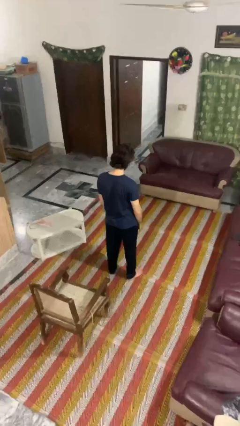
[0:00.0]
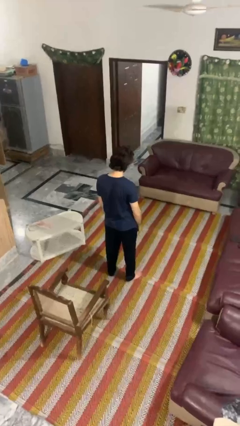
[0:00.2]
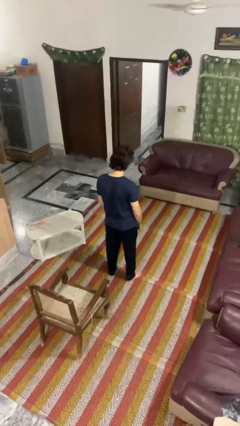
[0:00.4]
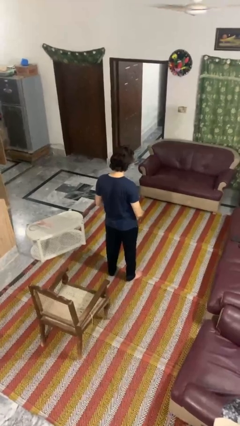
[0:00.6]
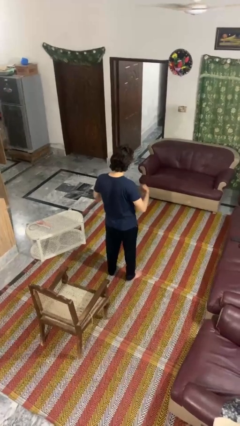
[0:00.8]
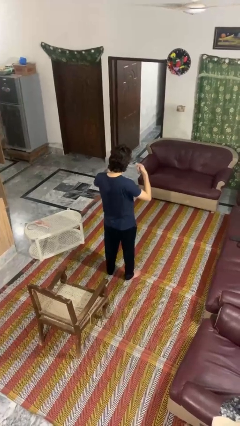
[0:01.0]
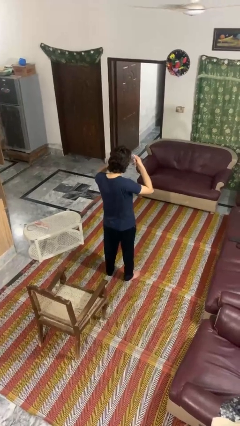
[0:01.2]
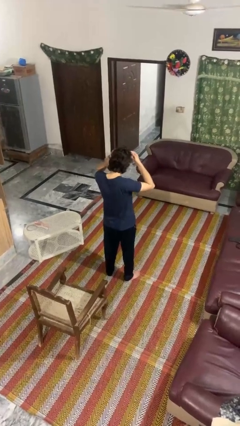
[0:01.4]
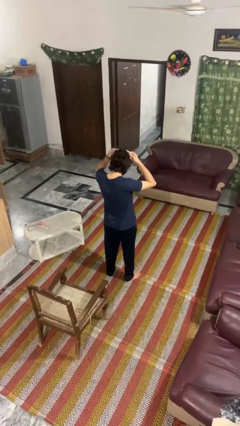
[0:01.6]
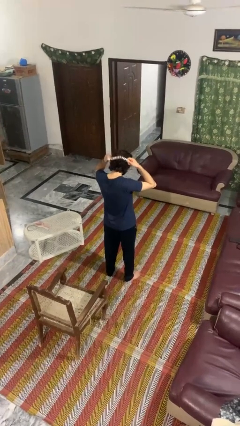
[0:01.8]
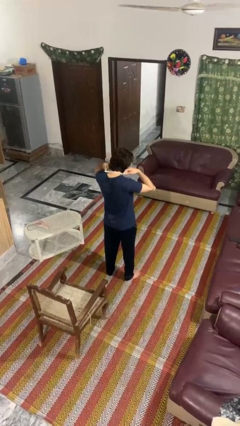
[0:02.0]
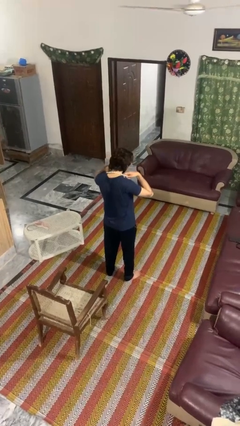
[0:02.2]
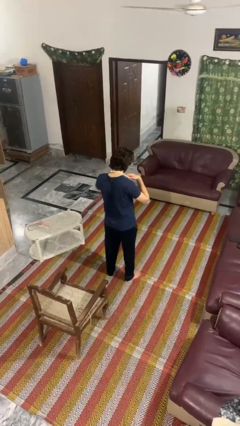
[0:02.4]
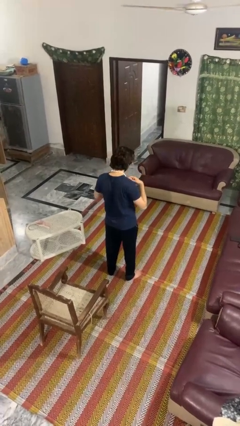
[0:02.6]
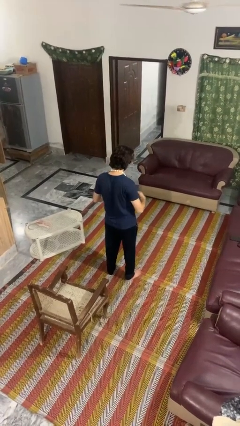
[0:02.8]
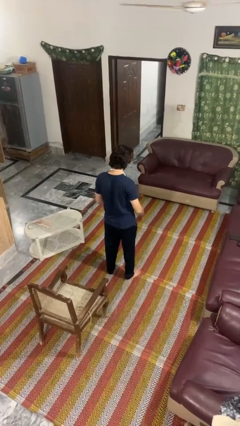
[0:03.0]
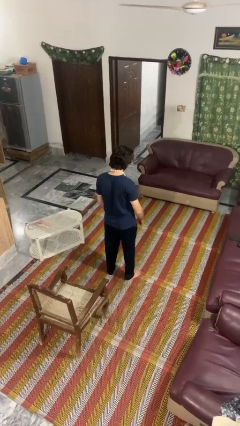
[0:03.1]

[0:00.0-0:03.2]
person puts on necklace

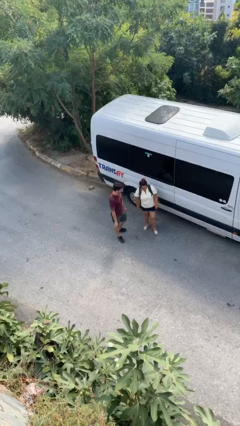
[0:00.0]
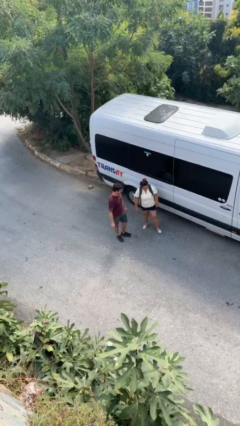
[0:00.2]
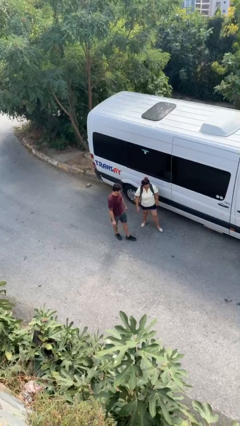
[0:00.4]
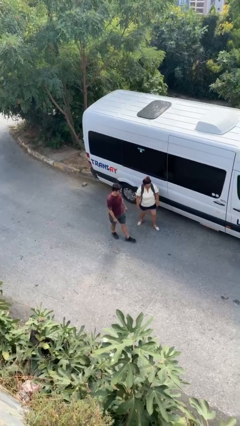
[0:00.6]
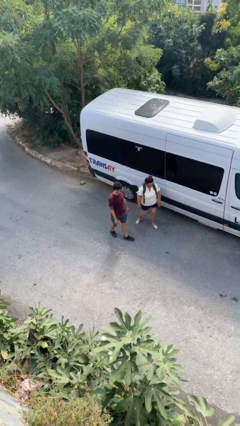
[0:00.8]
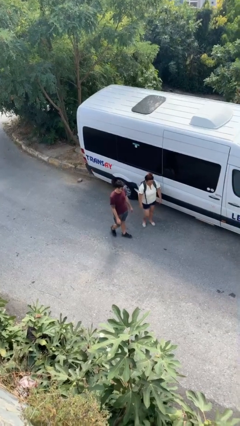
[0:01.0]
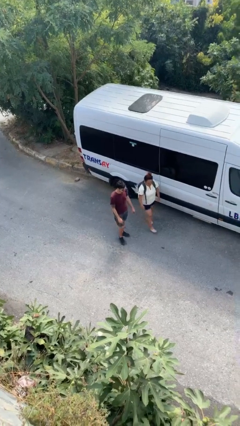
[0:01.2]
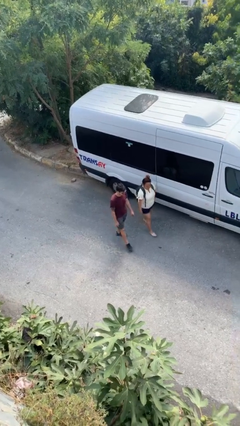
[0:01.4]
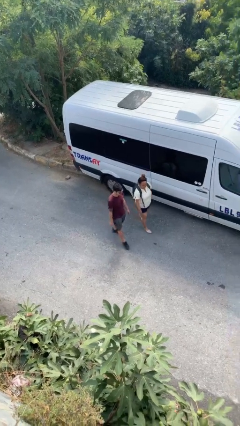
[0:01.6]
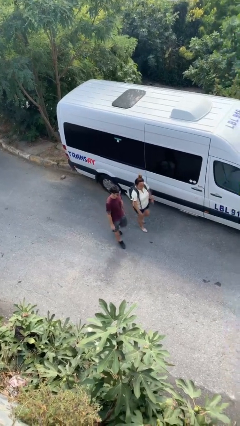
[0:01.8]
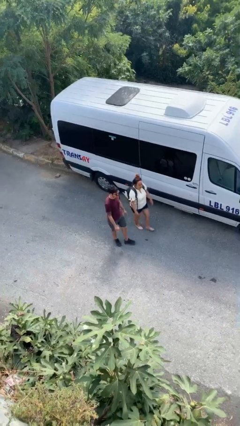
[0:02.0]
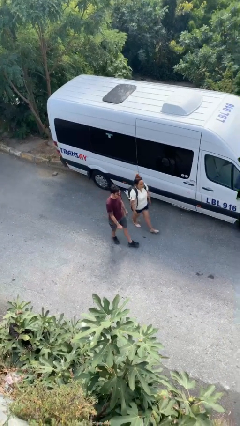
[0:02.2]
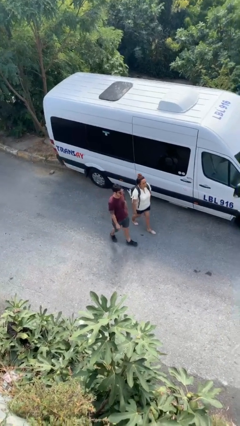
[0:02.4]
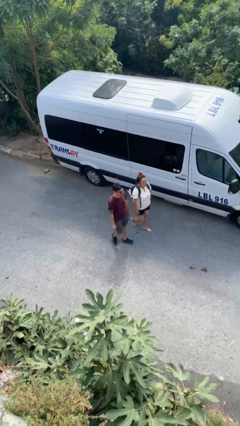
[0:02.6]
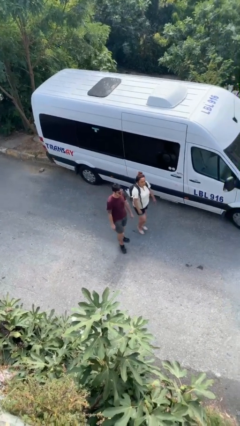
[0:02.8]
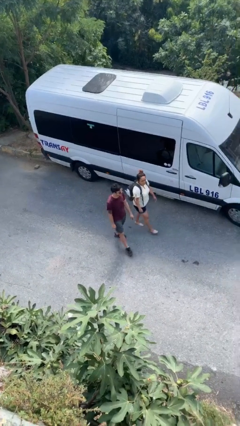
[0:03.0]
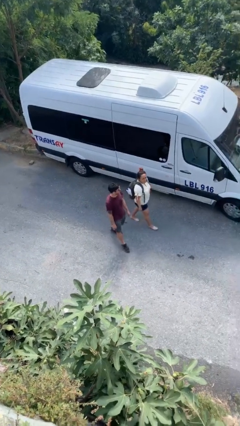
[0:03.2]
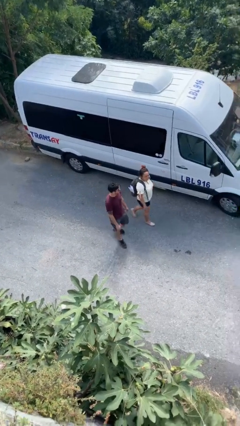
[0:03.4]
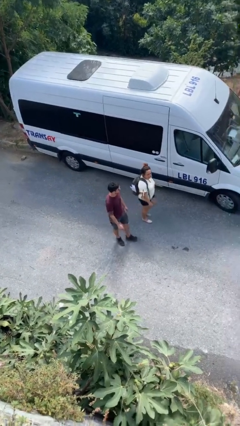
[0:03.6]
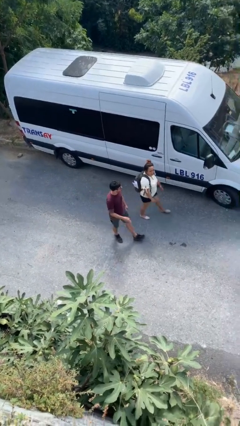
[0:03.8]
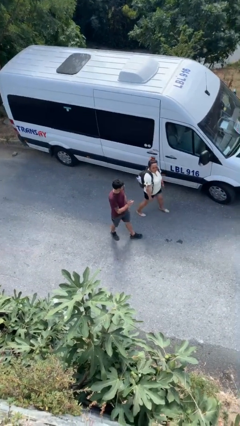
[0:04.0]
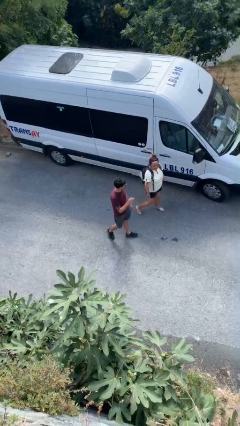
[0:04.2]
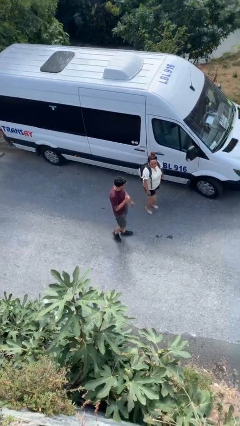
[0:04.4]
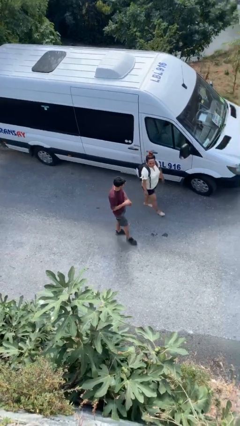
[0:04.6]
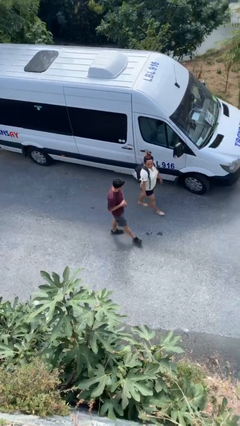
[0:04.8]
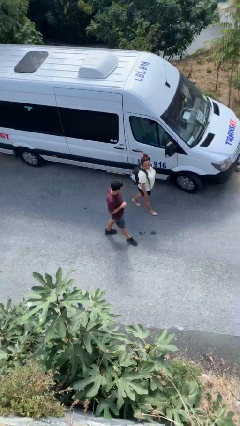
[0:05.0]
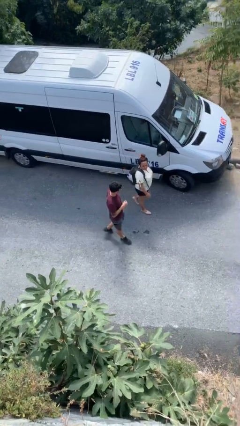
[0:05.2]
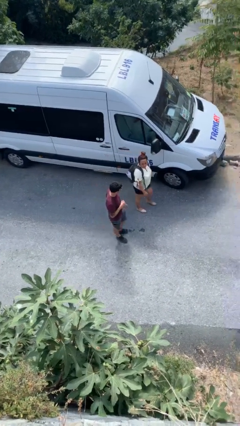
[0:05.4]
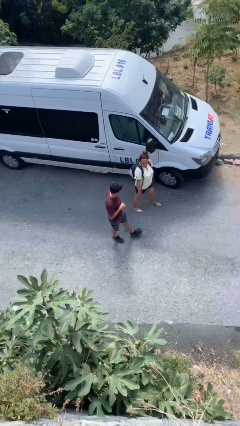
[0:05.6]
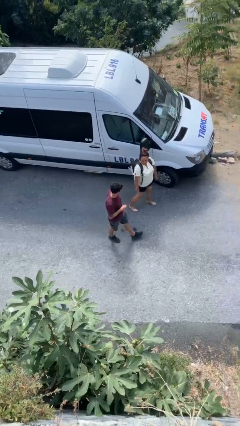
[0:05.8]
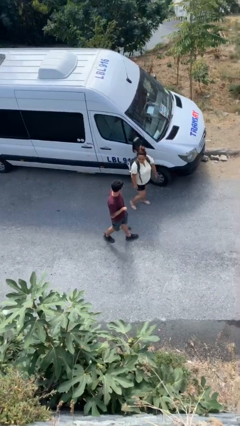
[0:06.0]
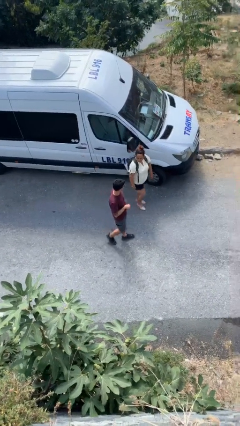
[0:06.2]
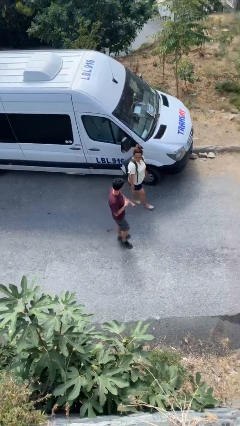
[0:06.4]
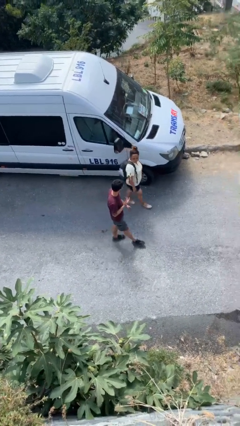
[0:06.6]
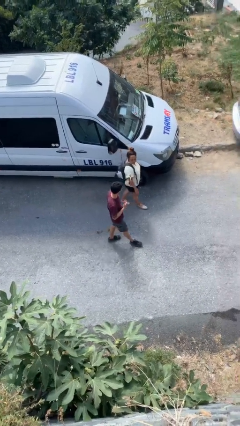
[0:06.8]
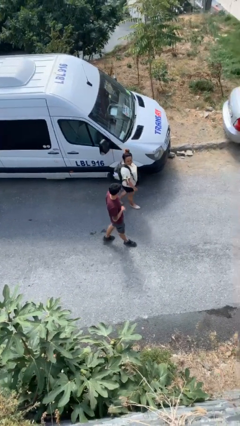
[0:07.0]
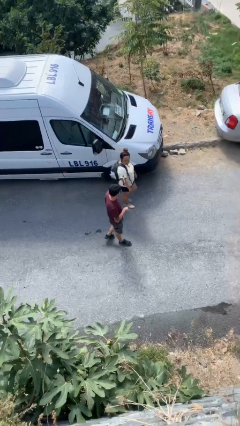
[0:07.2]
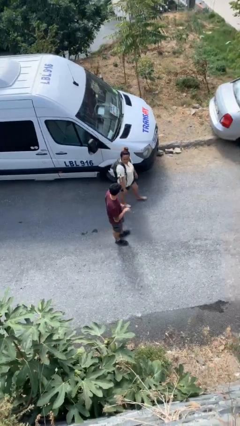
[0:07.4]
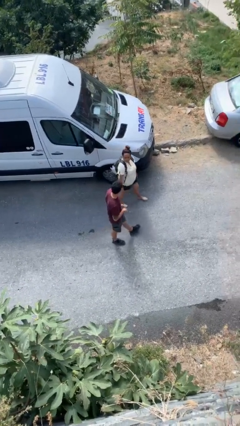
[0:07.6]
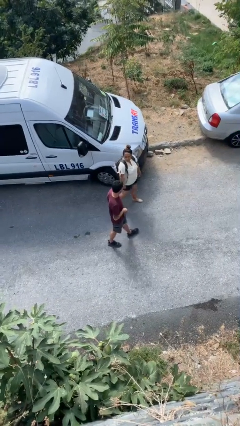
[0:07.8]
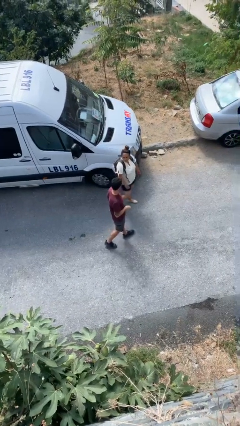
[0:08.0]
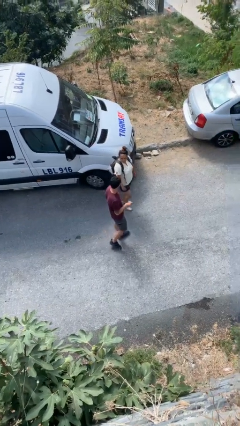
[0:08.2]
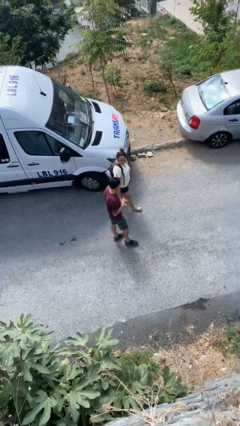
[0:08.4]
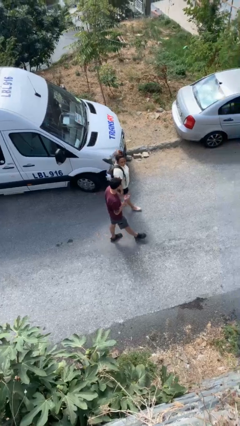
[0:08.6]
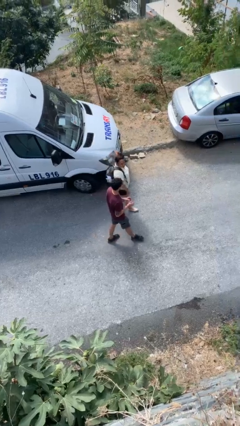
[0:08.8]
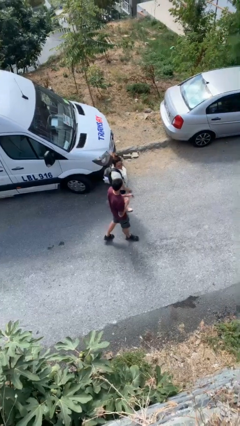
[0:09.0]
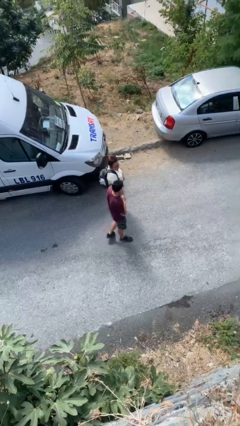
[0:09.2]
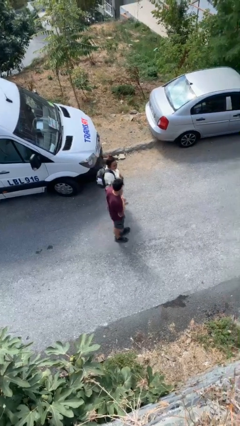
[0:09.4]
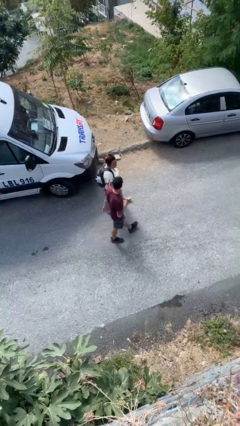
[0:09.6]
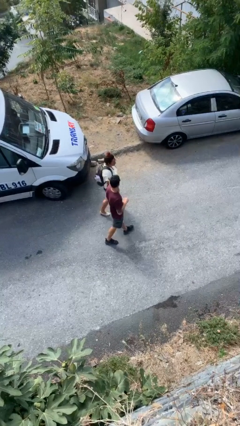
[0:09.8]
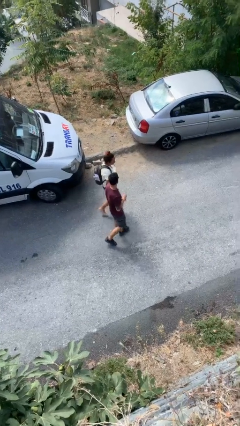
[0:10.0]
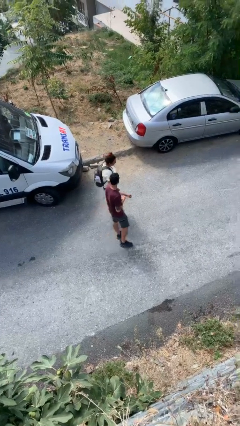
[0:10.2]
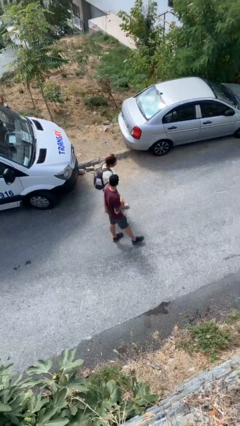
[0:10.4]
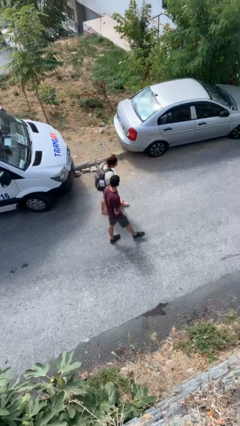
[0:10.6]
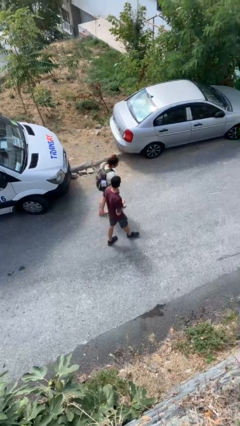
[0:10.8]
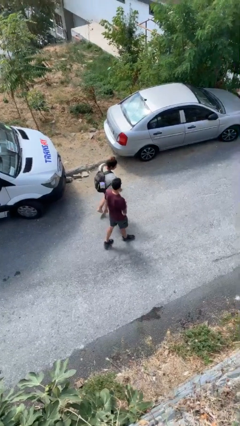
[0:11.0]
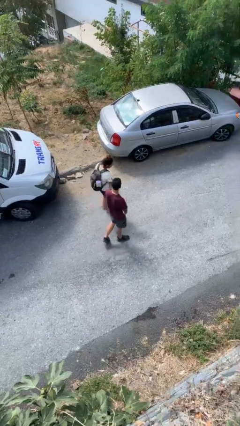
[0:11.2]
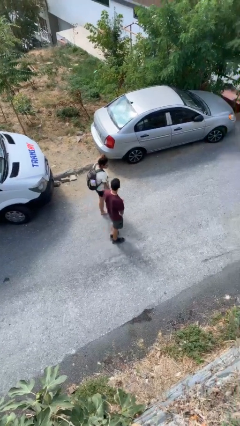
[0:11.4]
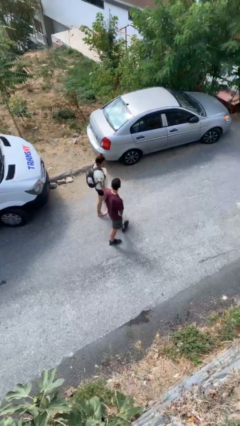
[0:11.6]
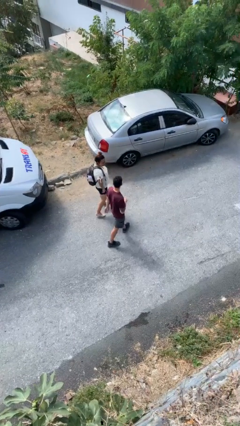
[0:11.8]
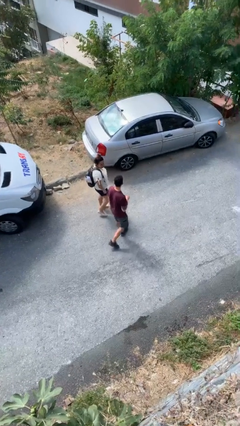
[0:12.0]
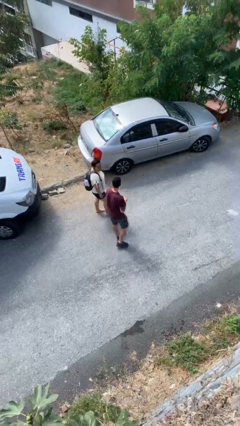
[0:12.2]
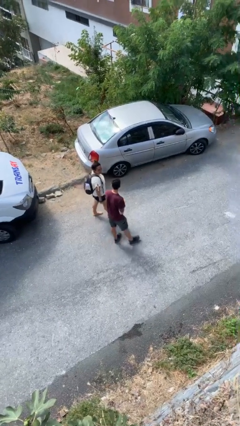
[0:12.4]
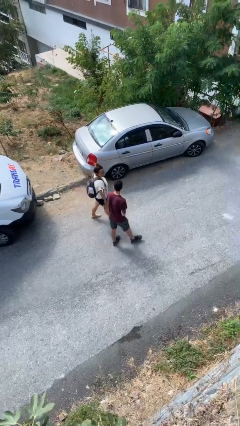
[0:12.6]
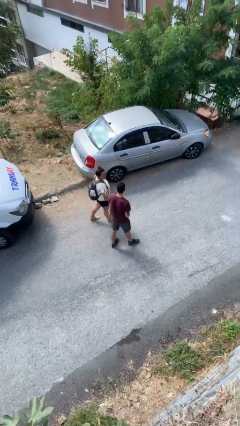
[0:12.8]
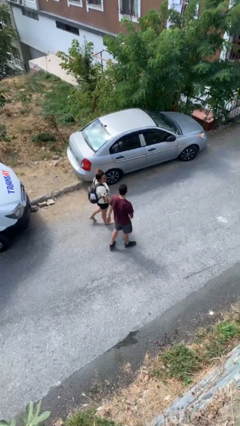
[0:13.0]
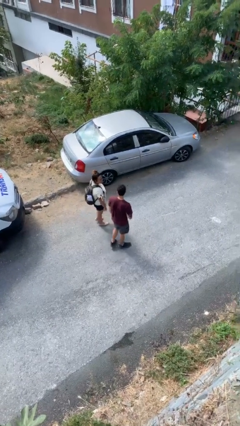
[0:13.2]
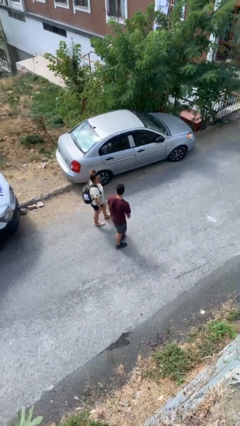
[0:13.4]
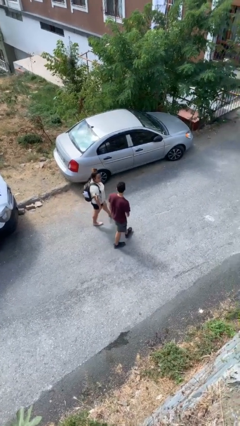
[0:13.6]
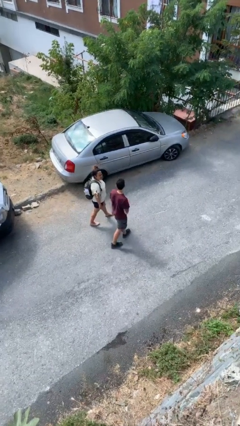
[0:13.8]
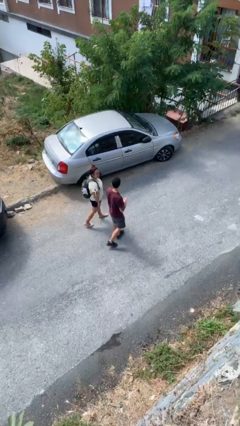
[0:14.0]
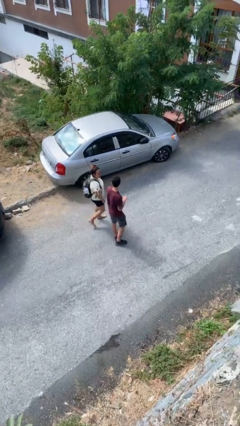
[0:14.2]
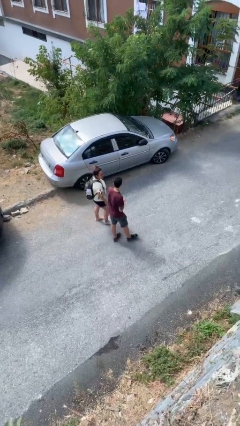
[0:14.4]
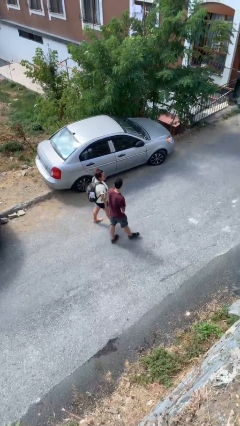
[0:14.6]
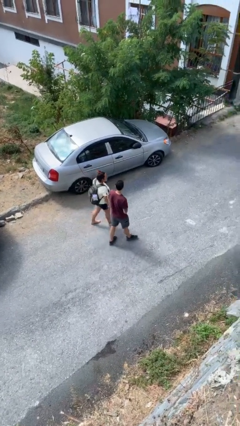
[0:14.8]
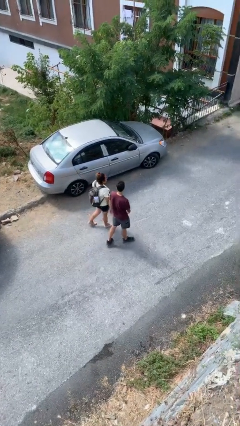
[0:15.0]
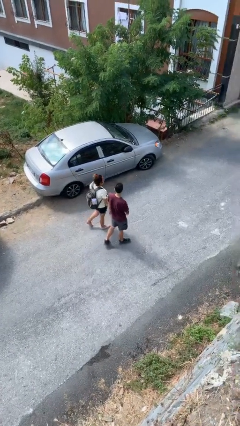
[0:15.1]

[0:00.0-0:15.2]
person talks to person
